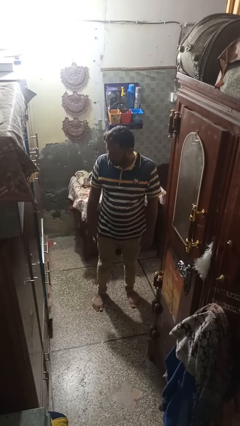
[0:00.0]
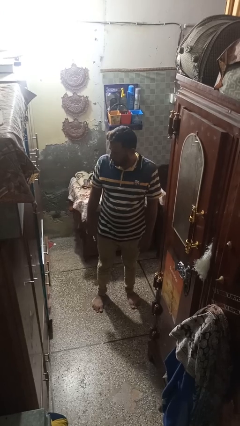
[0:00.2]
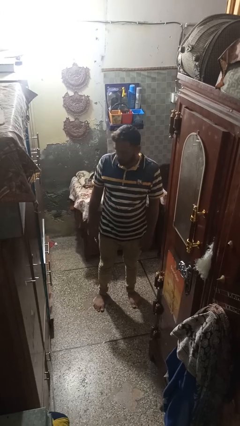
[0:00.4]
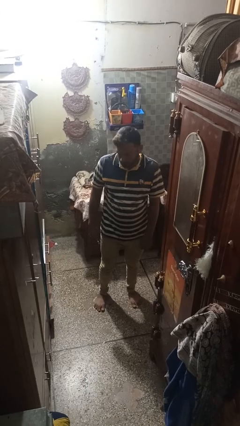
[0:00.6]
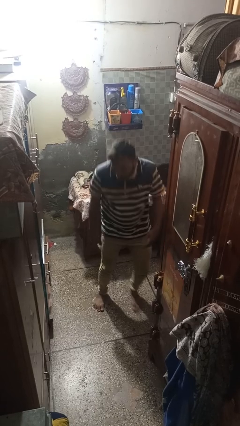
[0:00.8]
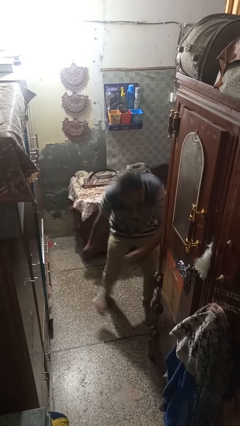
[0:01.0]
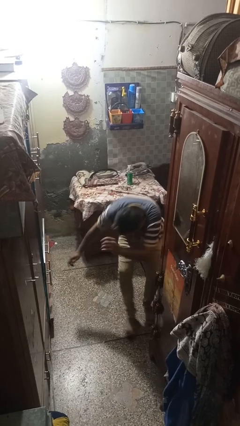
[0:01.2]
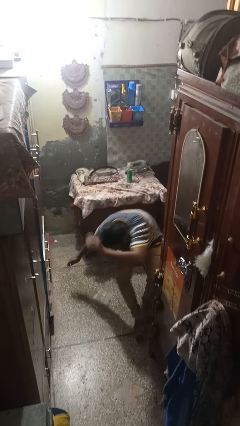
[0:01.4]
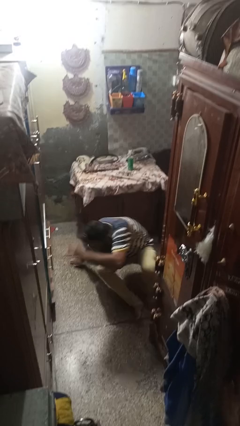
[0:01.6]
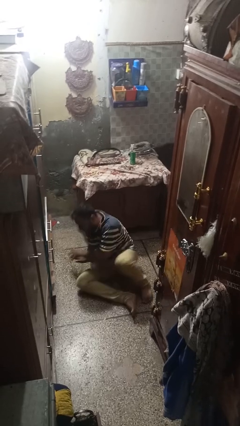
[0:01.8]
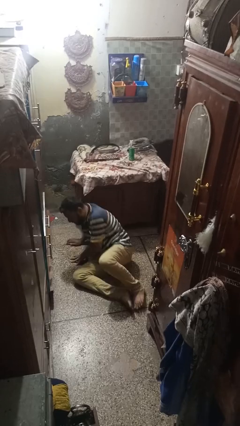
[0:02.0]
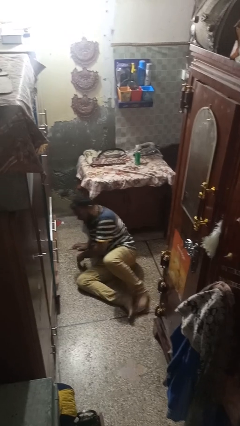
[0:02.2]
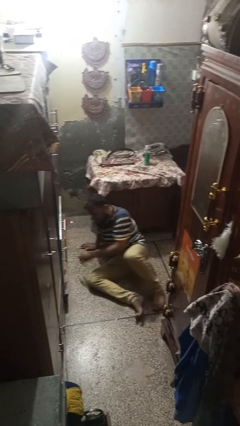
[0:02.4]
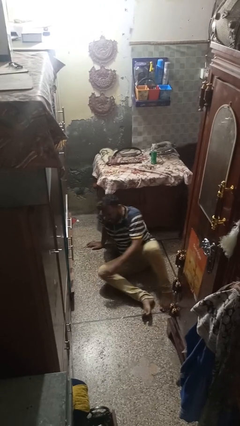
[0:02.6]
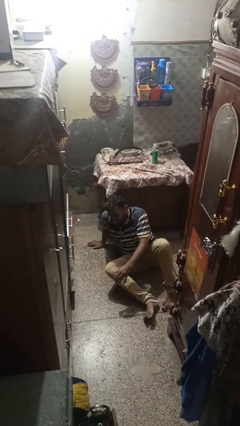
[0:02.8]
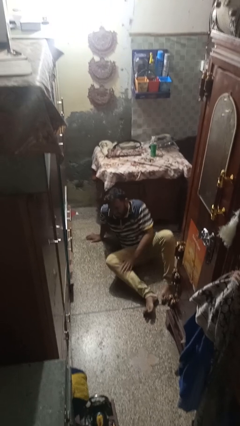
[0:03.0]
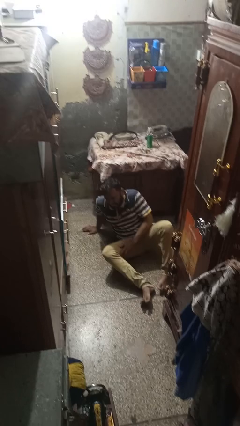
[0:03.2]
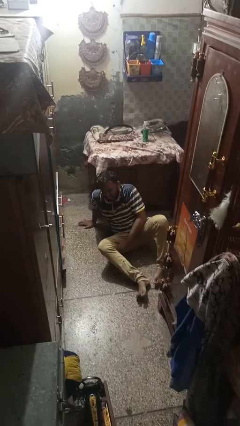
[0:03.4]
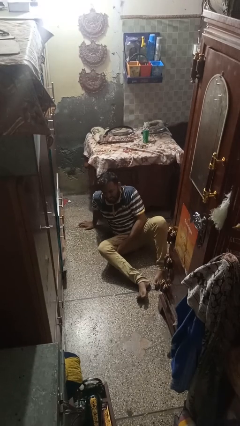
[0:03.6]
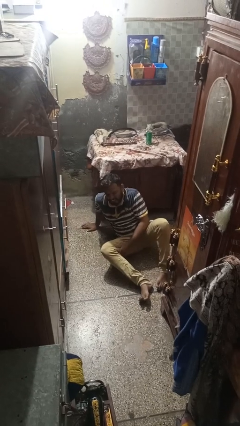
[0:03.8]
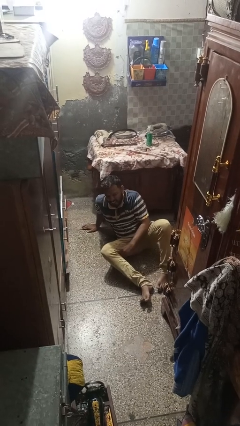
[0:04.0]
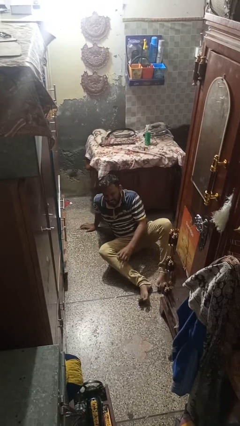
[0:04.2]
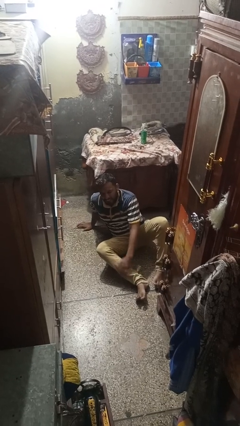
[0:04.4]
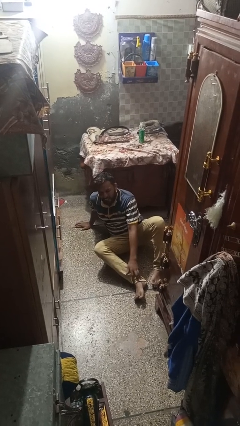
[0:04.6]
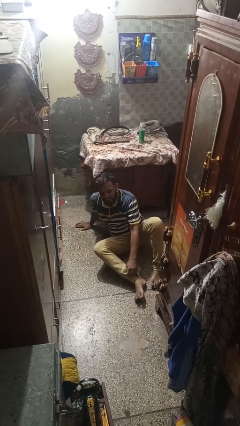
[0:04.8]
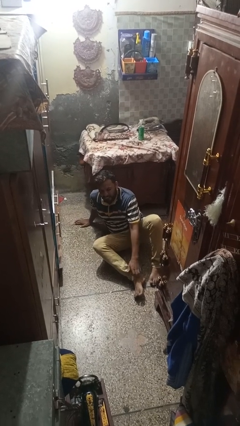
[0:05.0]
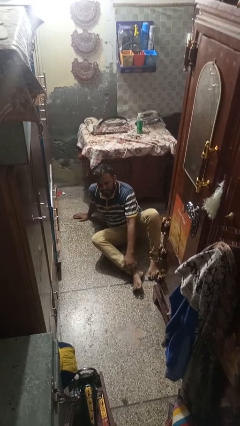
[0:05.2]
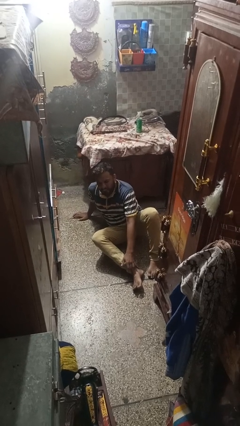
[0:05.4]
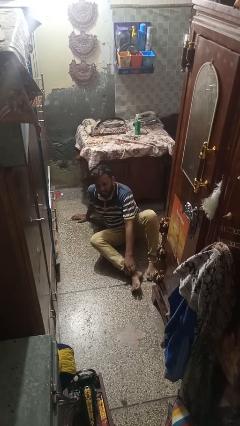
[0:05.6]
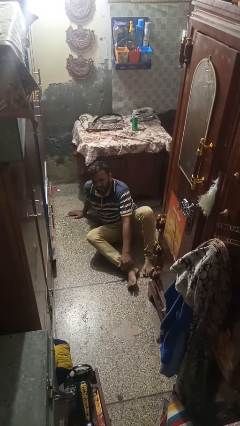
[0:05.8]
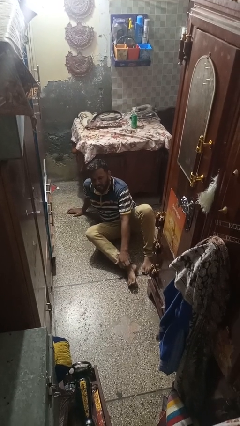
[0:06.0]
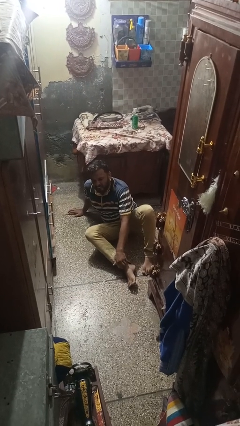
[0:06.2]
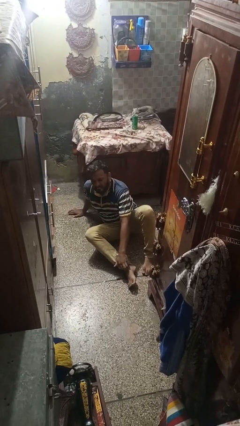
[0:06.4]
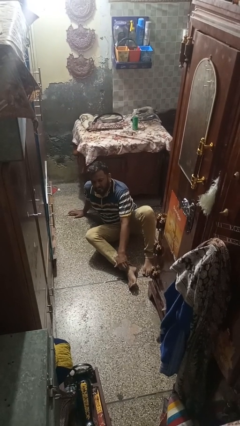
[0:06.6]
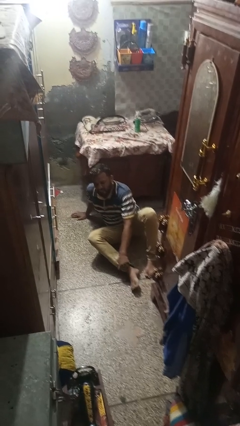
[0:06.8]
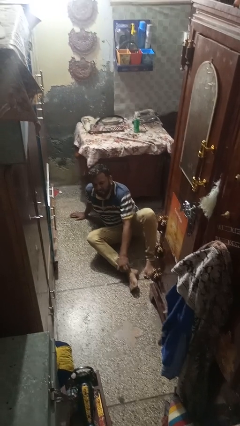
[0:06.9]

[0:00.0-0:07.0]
person falls while standing

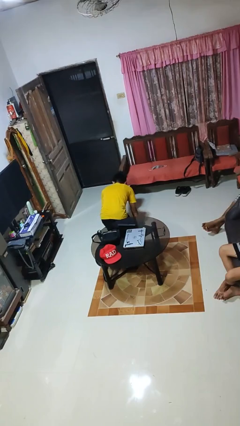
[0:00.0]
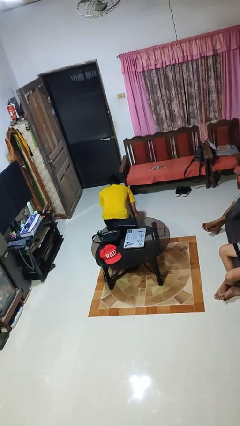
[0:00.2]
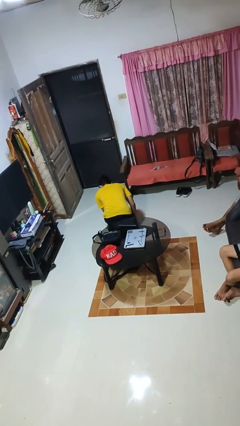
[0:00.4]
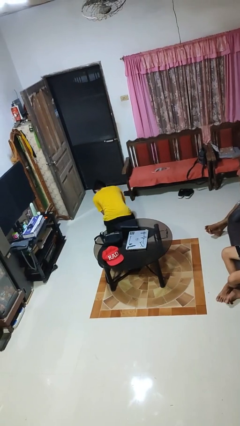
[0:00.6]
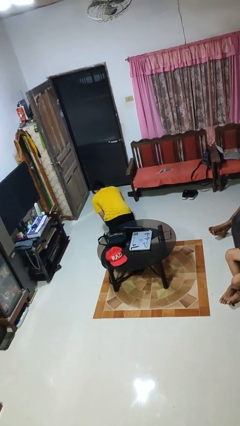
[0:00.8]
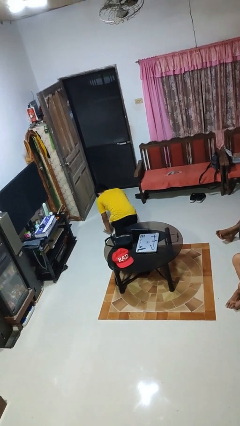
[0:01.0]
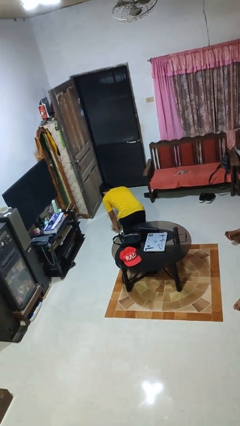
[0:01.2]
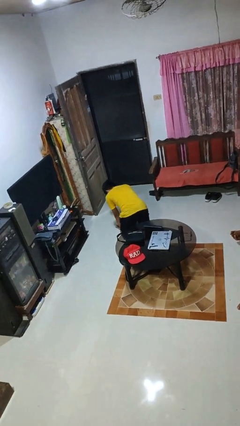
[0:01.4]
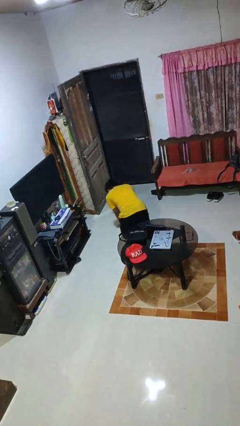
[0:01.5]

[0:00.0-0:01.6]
person crawls

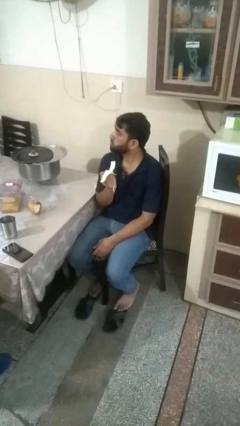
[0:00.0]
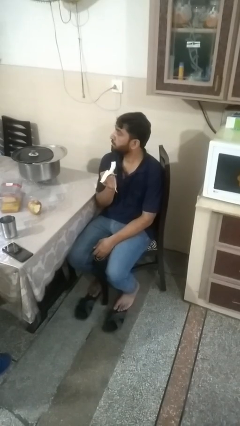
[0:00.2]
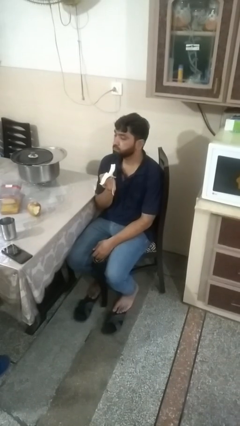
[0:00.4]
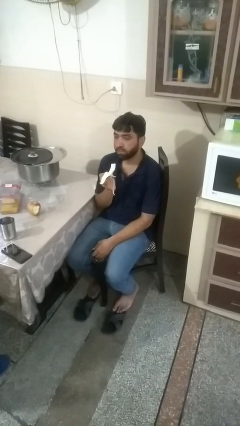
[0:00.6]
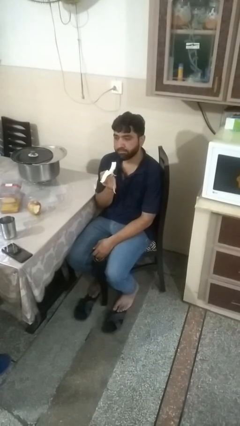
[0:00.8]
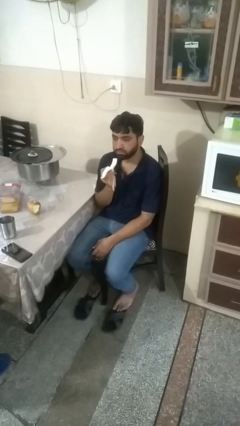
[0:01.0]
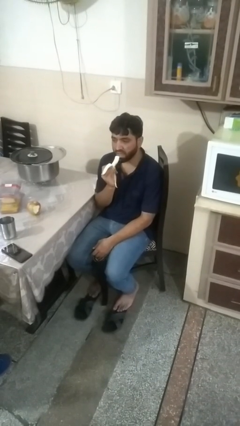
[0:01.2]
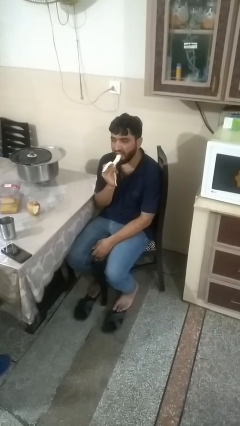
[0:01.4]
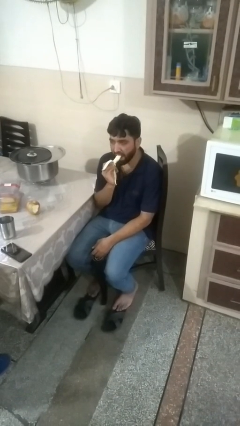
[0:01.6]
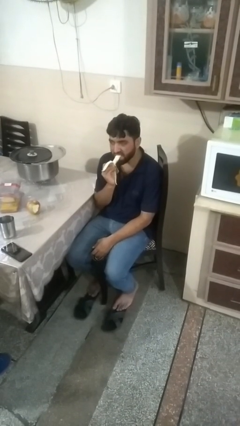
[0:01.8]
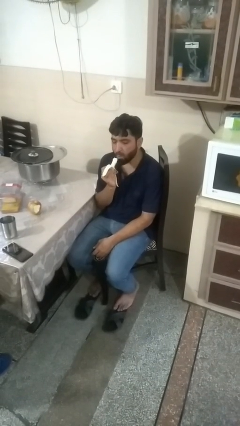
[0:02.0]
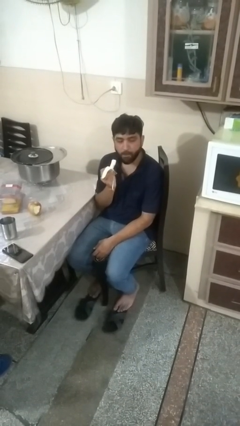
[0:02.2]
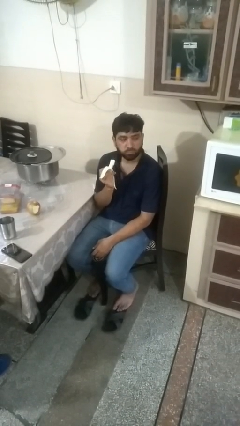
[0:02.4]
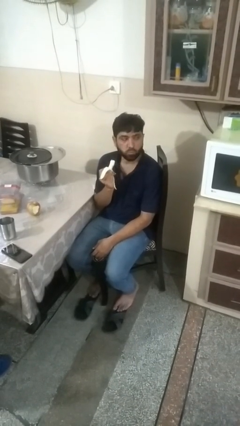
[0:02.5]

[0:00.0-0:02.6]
person eats banana

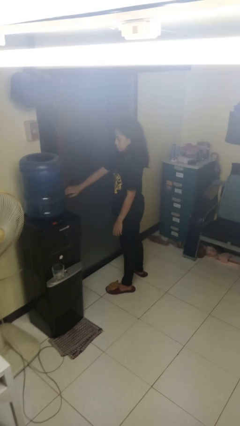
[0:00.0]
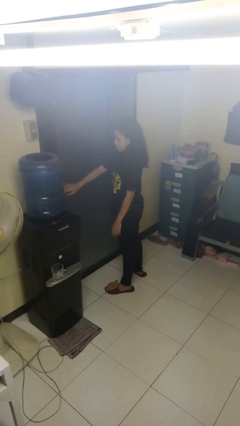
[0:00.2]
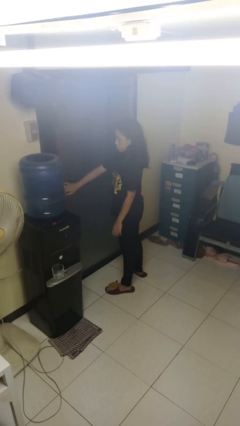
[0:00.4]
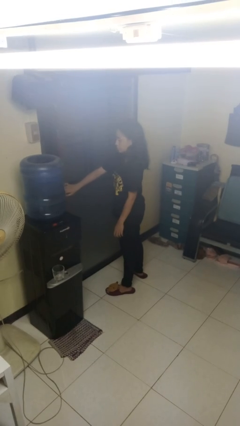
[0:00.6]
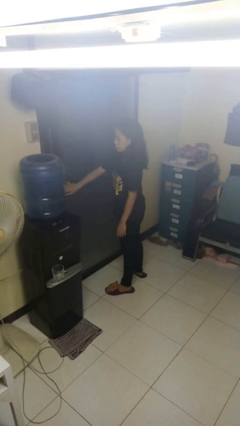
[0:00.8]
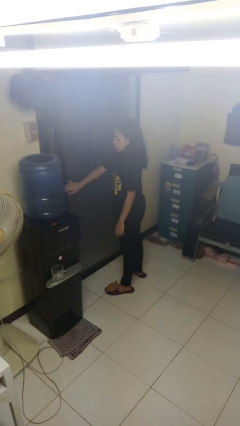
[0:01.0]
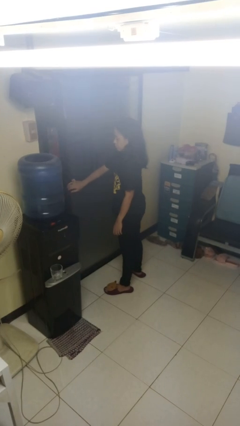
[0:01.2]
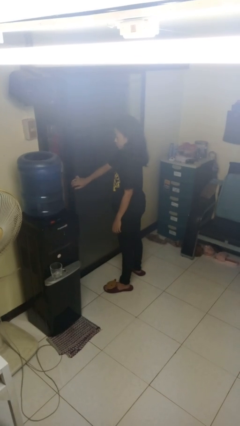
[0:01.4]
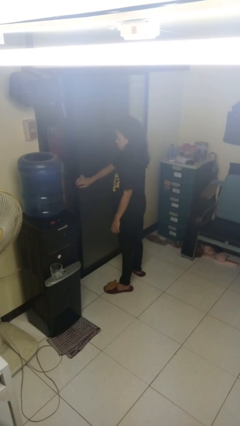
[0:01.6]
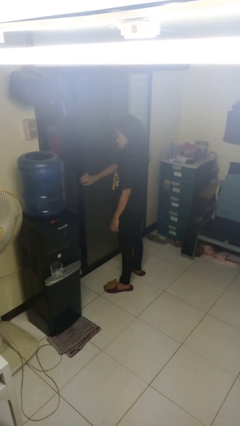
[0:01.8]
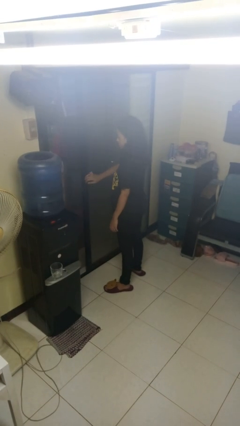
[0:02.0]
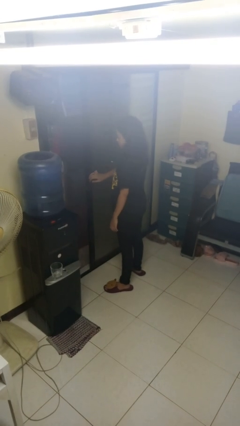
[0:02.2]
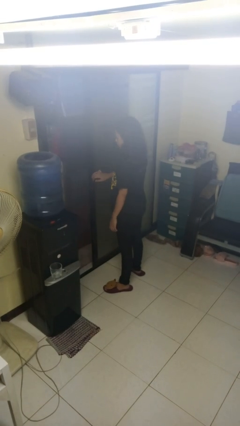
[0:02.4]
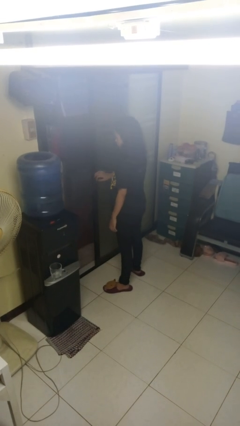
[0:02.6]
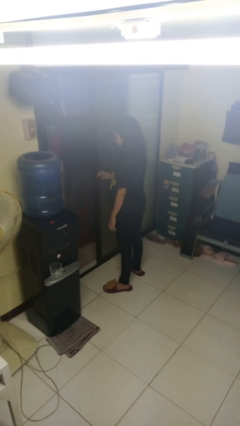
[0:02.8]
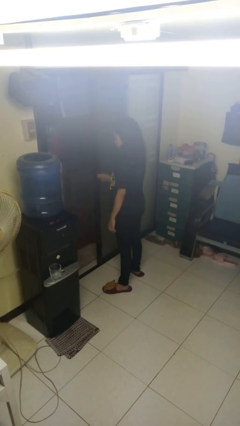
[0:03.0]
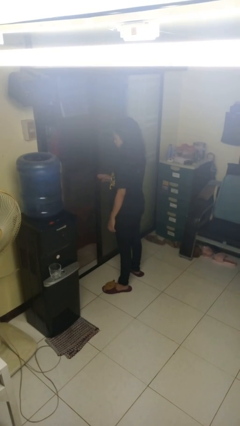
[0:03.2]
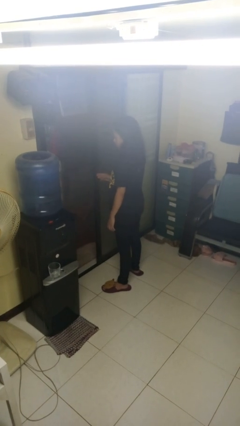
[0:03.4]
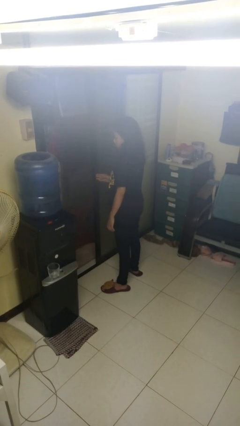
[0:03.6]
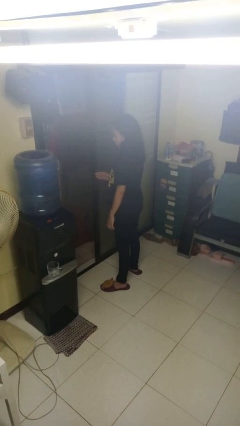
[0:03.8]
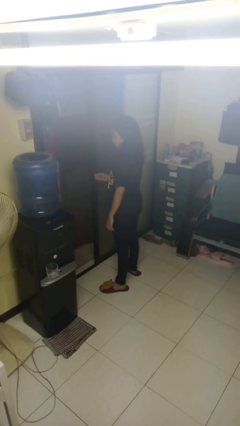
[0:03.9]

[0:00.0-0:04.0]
person opens sliding door

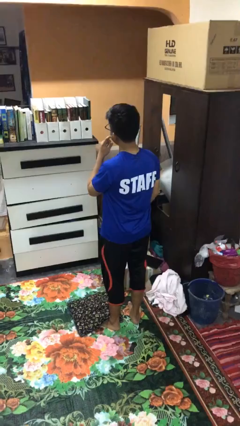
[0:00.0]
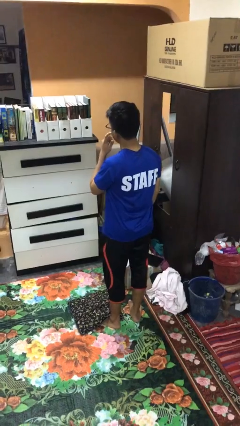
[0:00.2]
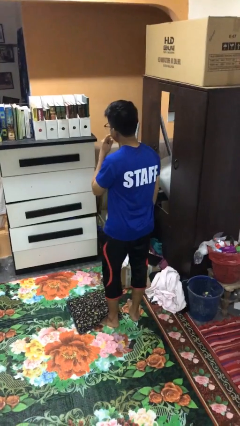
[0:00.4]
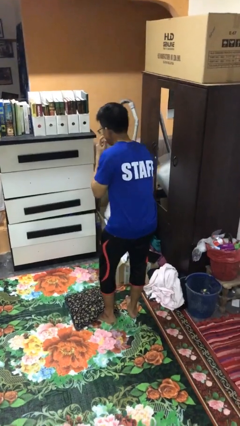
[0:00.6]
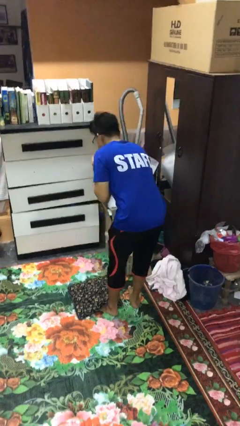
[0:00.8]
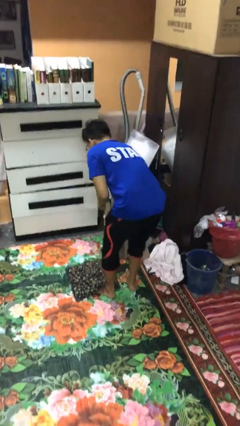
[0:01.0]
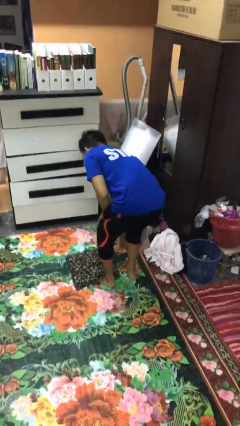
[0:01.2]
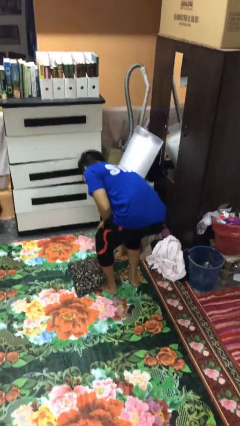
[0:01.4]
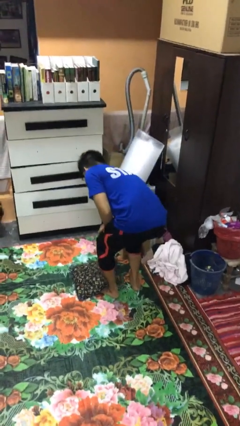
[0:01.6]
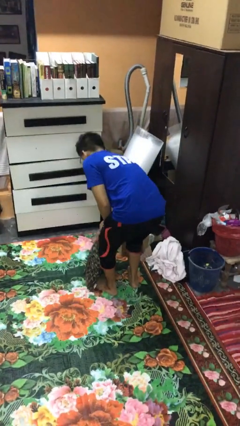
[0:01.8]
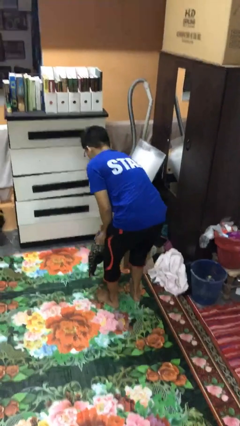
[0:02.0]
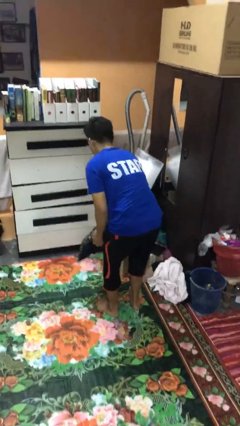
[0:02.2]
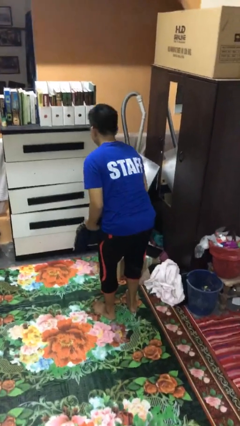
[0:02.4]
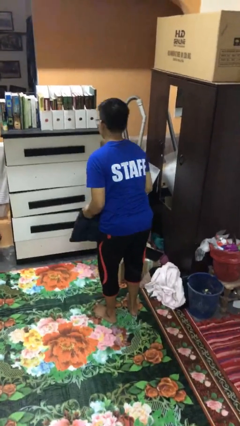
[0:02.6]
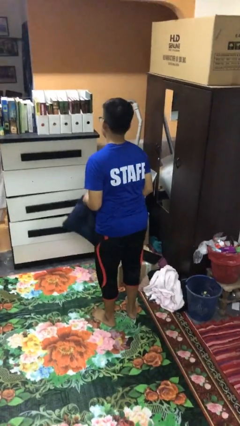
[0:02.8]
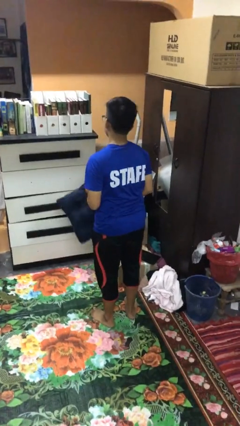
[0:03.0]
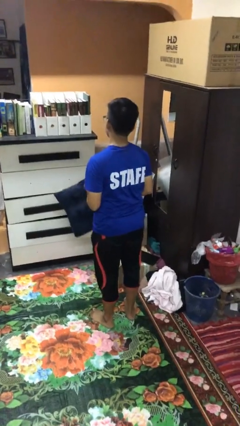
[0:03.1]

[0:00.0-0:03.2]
person picks up object from floor
